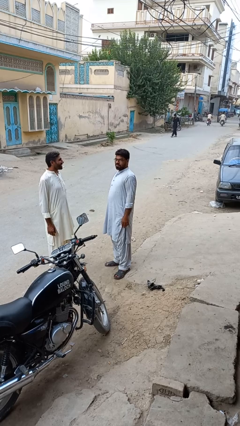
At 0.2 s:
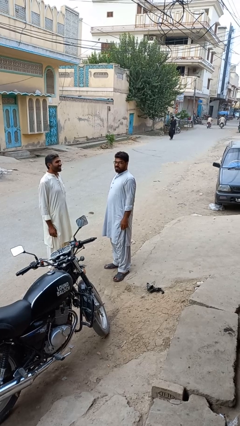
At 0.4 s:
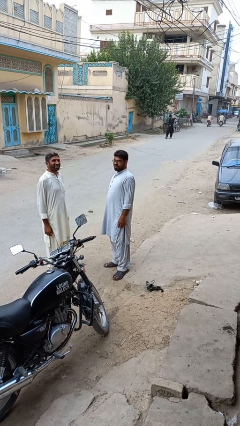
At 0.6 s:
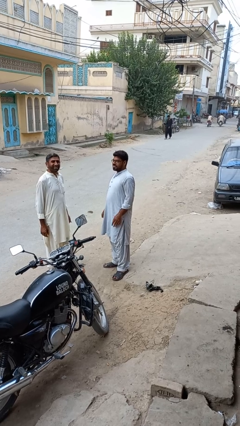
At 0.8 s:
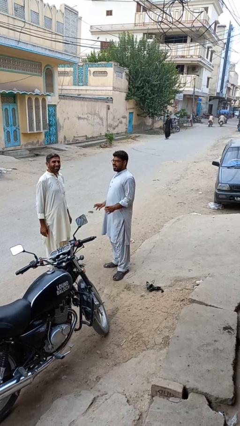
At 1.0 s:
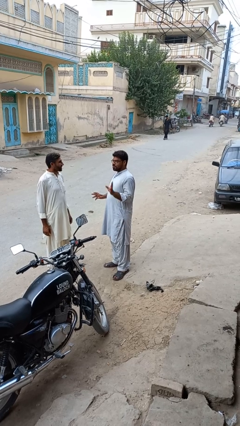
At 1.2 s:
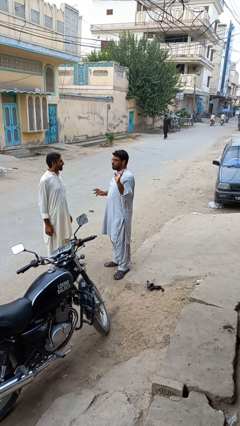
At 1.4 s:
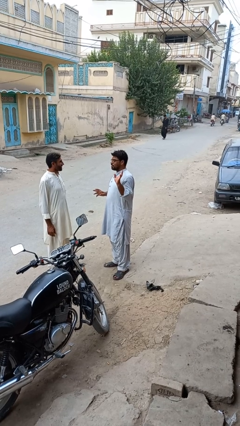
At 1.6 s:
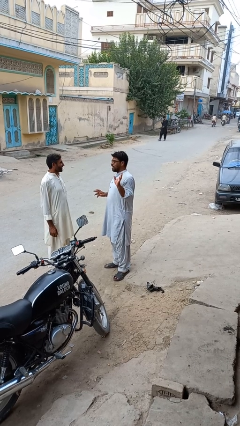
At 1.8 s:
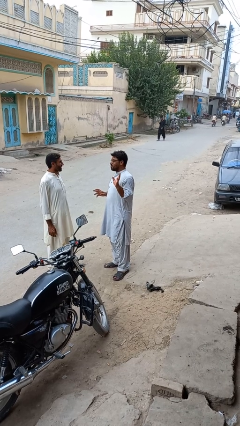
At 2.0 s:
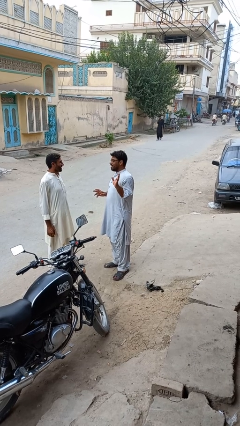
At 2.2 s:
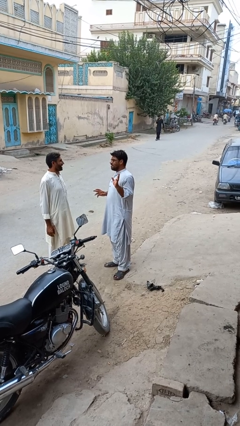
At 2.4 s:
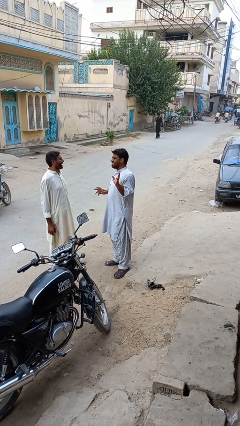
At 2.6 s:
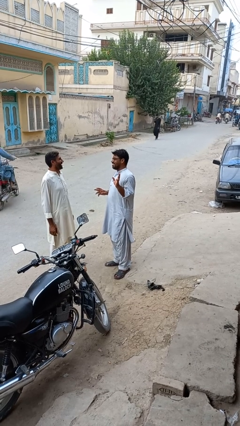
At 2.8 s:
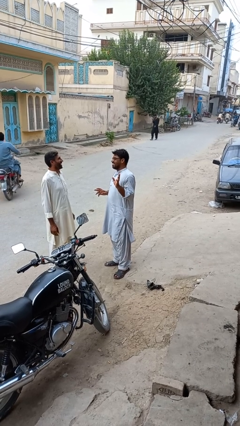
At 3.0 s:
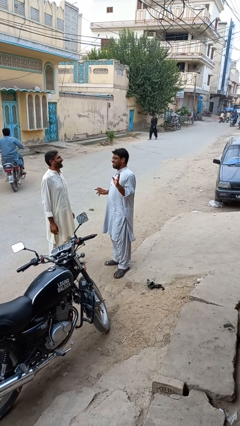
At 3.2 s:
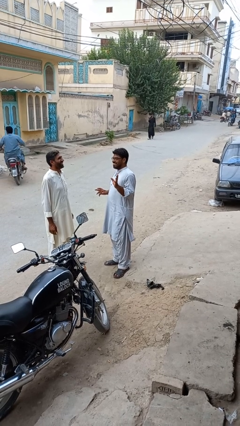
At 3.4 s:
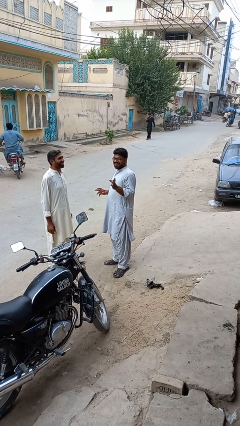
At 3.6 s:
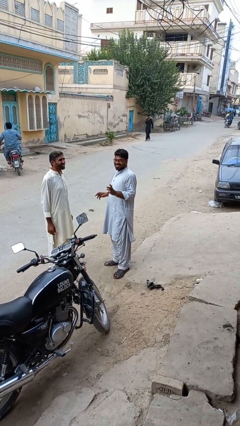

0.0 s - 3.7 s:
person laughs with person

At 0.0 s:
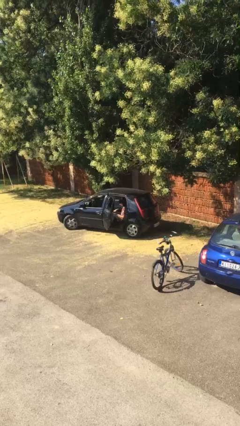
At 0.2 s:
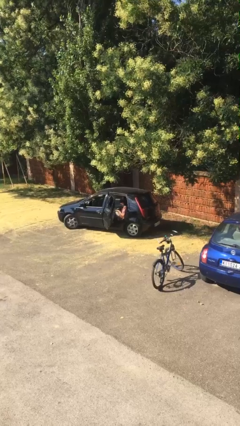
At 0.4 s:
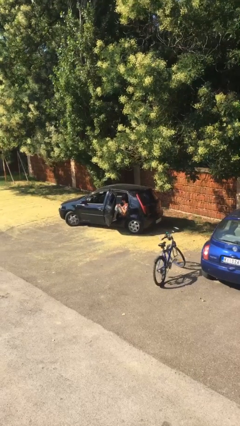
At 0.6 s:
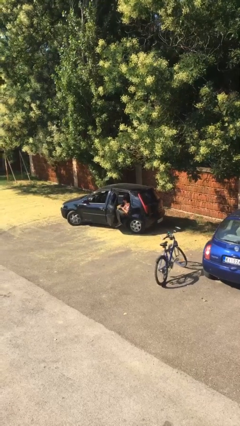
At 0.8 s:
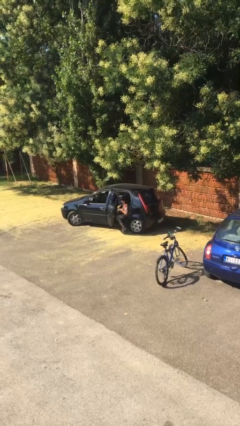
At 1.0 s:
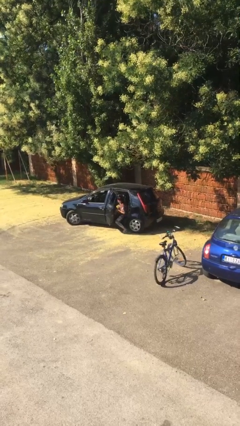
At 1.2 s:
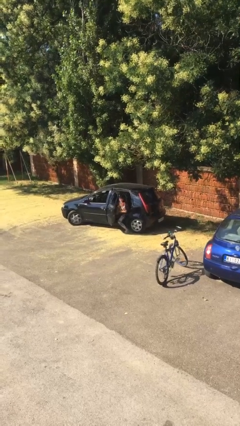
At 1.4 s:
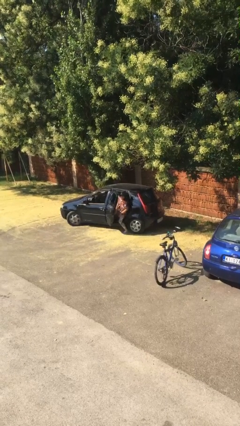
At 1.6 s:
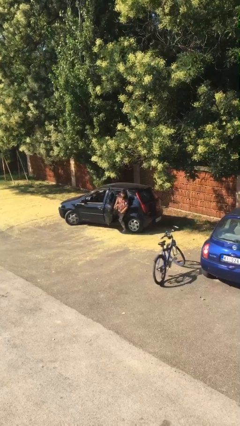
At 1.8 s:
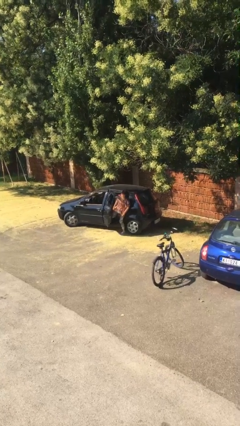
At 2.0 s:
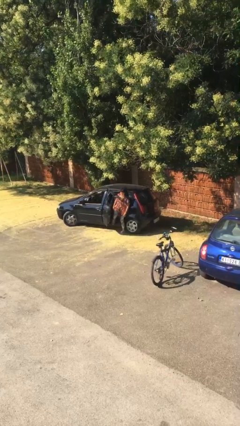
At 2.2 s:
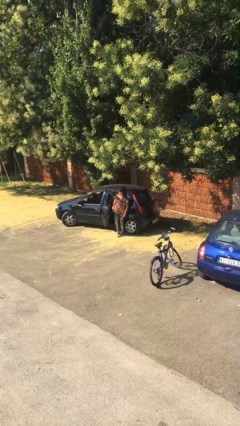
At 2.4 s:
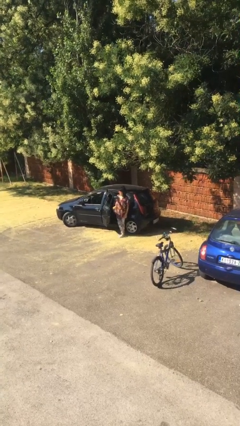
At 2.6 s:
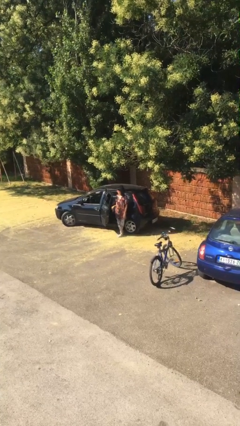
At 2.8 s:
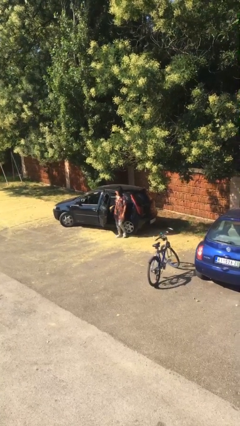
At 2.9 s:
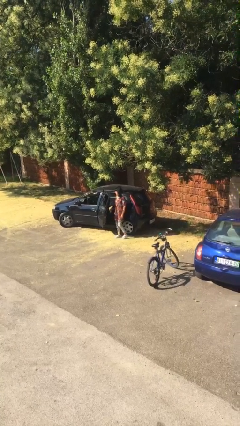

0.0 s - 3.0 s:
person exits car

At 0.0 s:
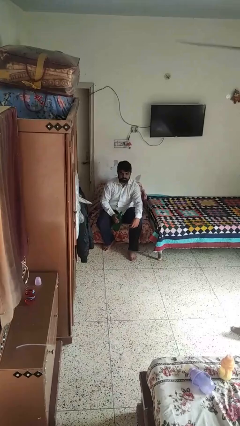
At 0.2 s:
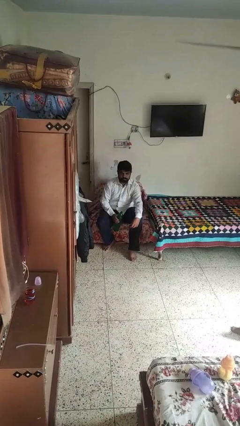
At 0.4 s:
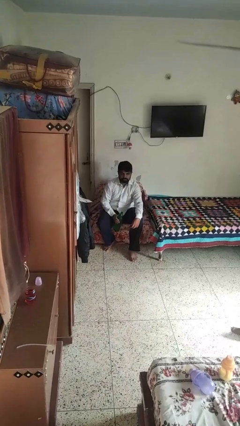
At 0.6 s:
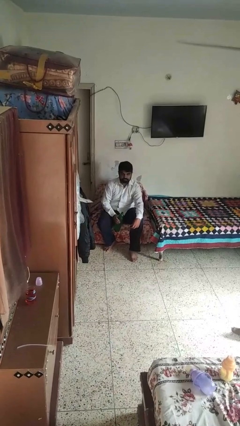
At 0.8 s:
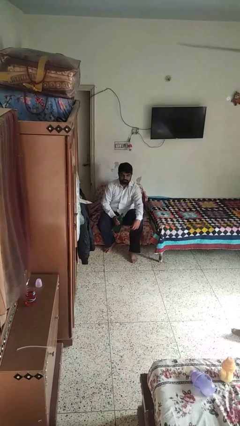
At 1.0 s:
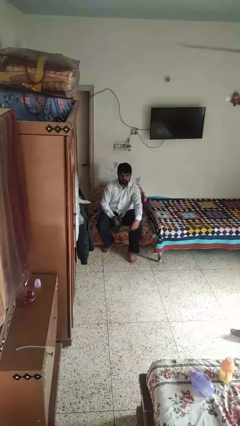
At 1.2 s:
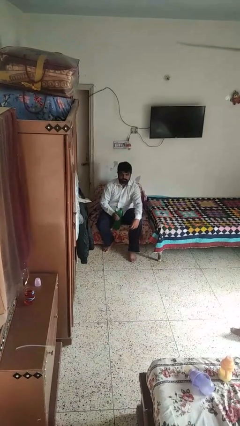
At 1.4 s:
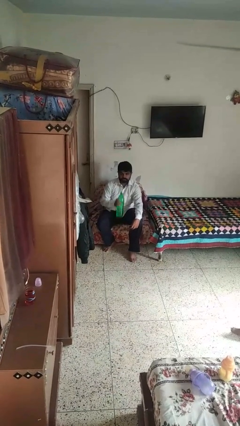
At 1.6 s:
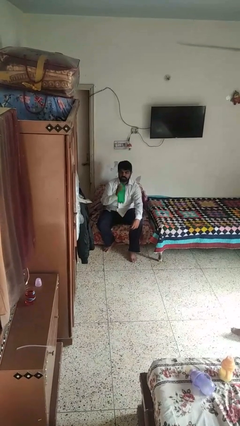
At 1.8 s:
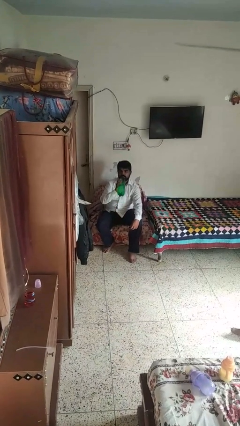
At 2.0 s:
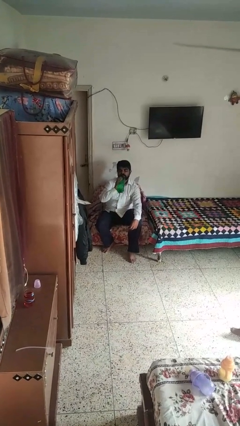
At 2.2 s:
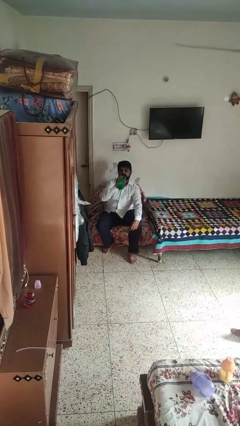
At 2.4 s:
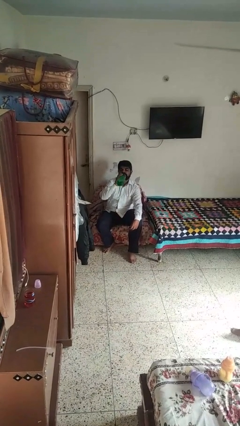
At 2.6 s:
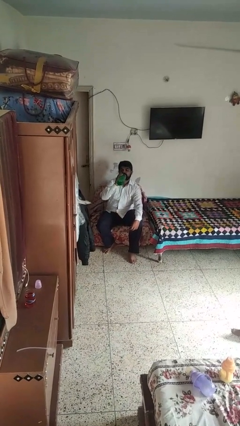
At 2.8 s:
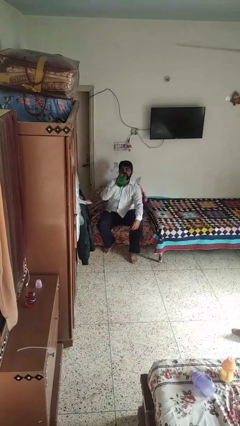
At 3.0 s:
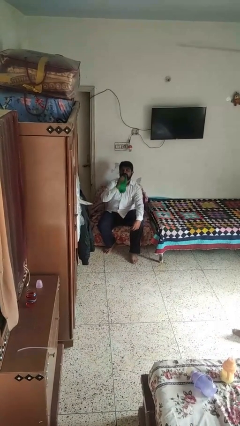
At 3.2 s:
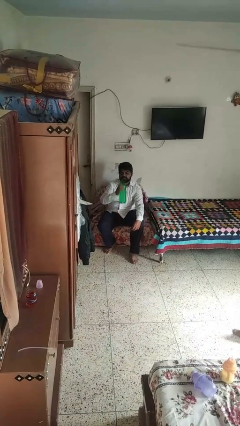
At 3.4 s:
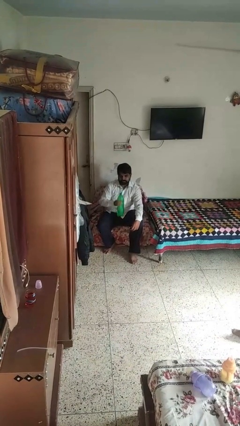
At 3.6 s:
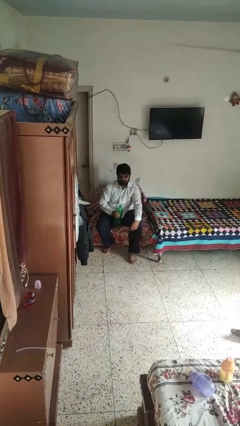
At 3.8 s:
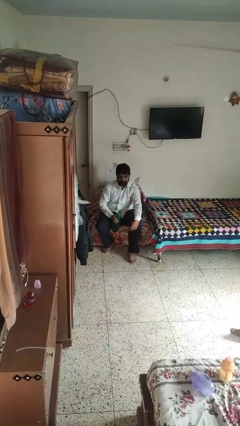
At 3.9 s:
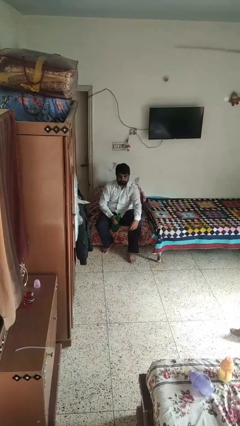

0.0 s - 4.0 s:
person drinks from bottle

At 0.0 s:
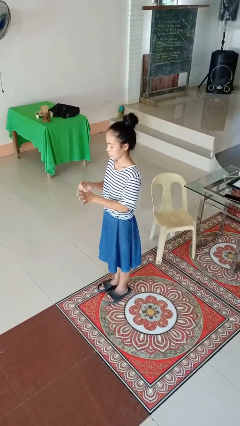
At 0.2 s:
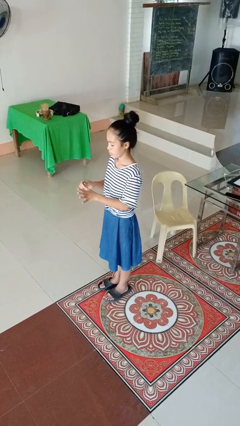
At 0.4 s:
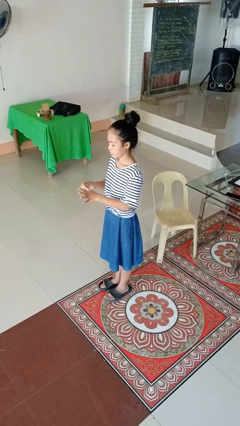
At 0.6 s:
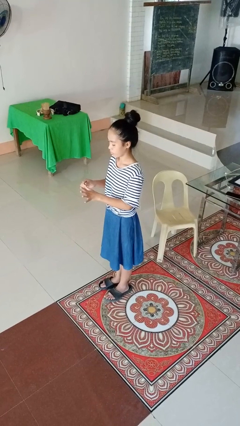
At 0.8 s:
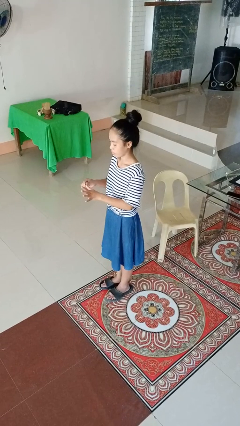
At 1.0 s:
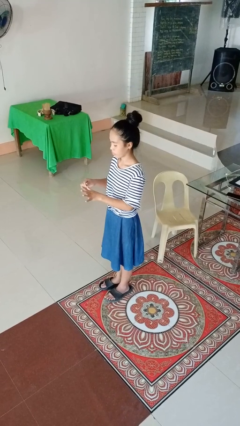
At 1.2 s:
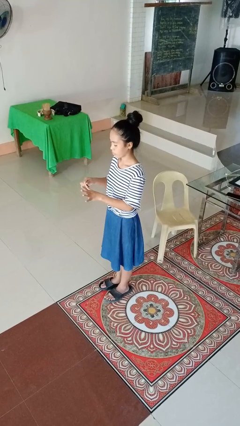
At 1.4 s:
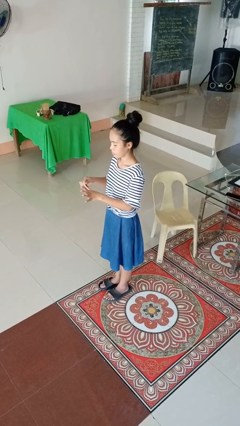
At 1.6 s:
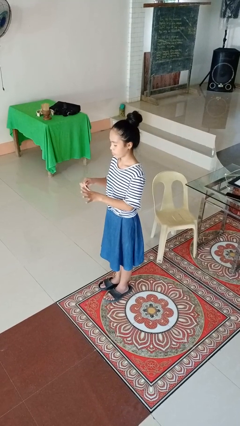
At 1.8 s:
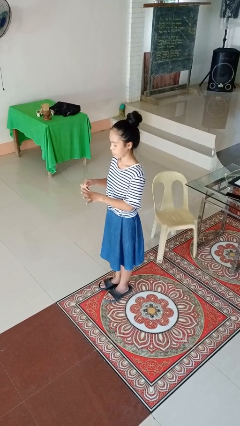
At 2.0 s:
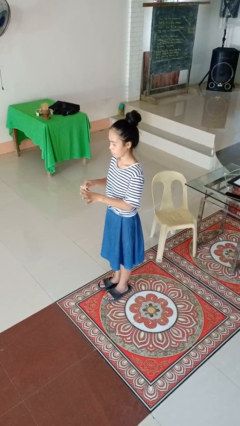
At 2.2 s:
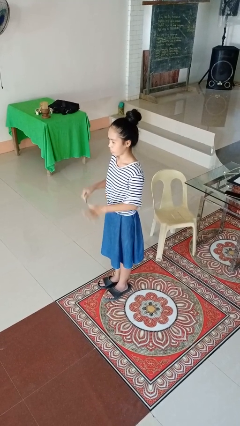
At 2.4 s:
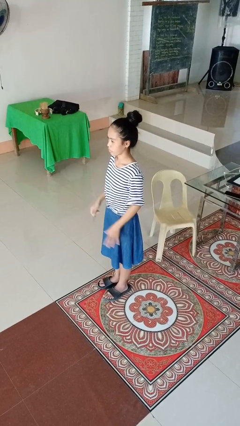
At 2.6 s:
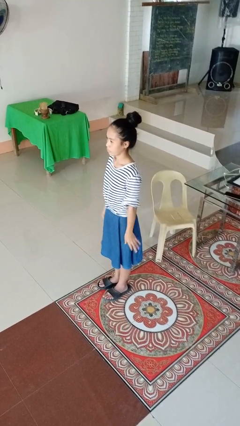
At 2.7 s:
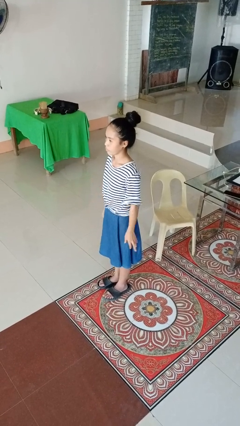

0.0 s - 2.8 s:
person files fingernails

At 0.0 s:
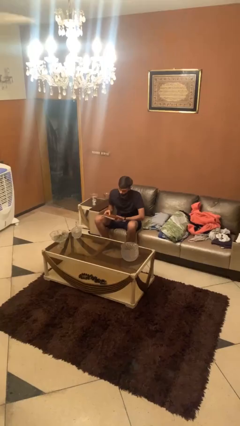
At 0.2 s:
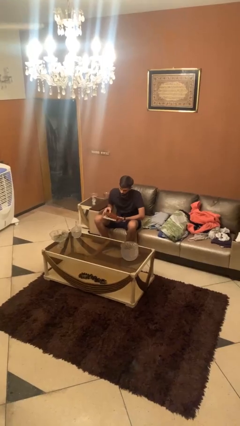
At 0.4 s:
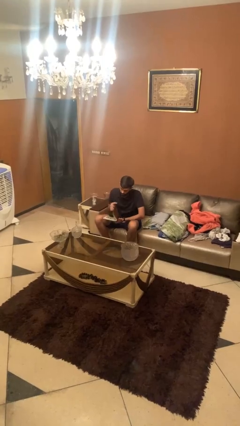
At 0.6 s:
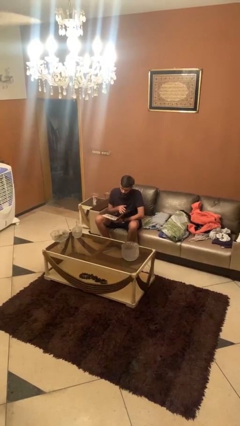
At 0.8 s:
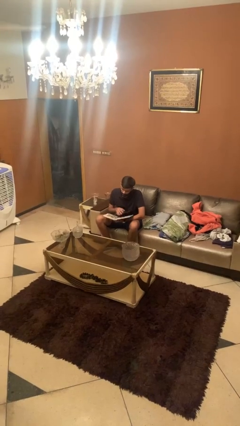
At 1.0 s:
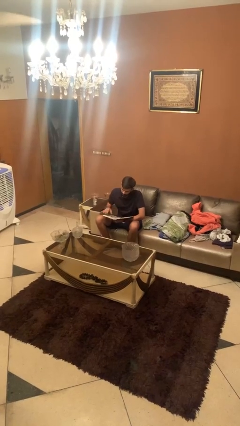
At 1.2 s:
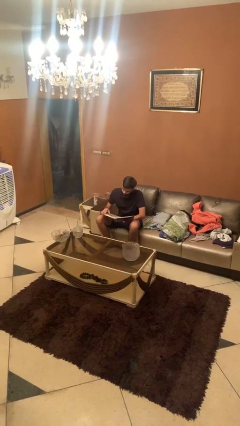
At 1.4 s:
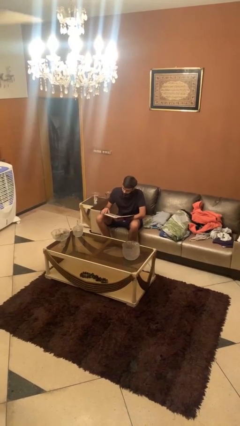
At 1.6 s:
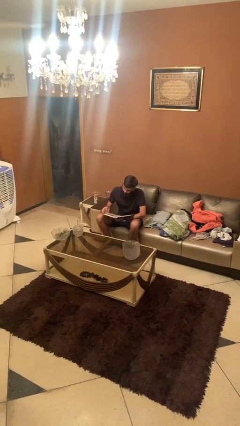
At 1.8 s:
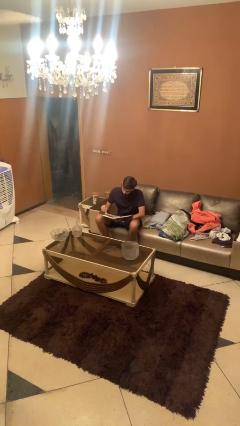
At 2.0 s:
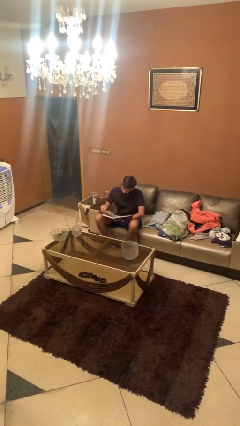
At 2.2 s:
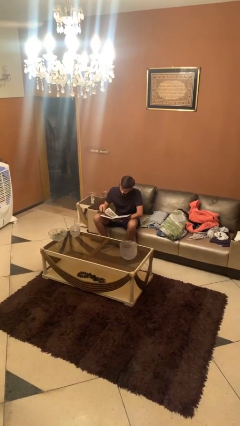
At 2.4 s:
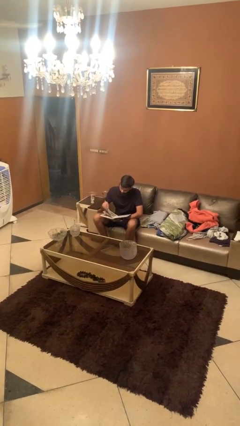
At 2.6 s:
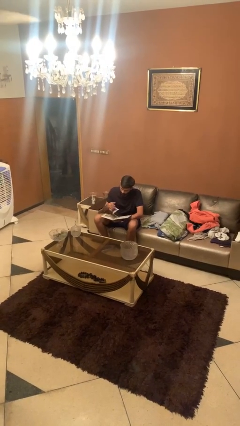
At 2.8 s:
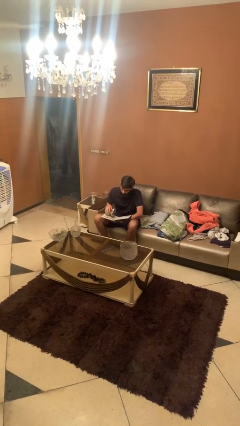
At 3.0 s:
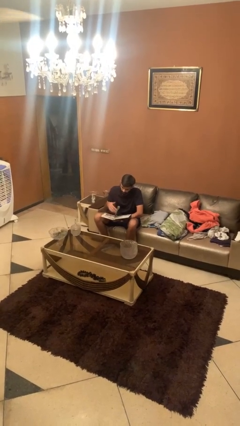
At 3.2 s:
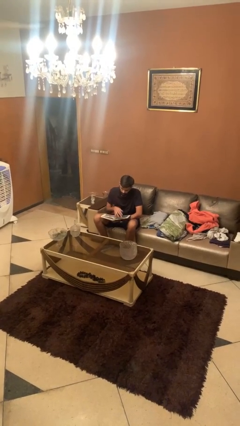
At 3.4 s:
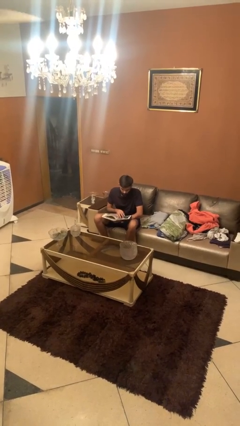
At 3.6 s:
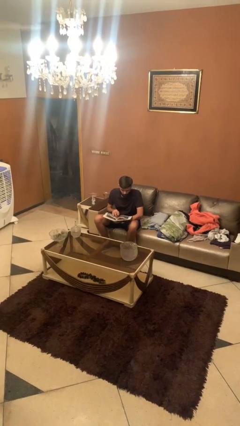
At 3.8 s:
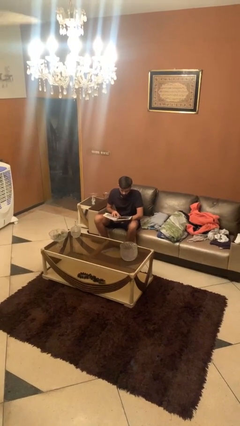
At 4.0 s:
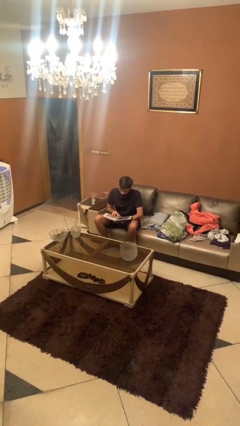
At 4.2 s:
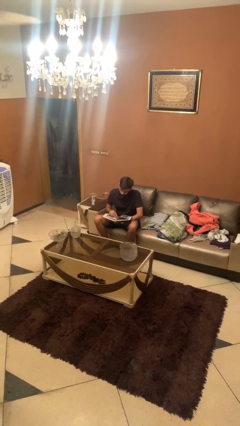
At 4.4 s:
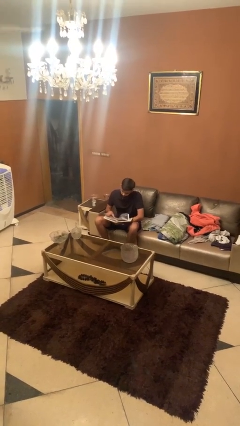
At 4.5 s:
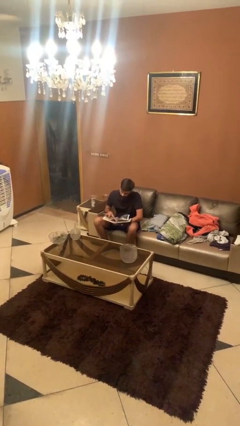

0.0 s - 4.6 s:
person reads document
